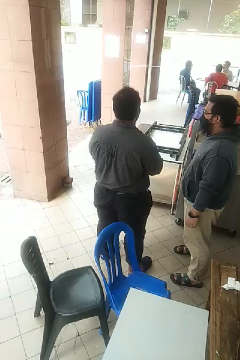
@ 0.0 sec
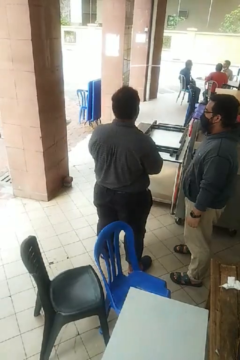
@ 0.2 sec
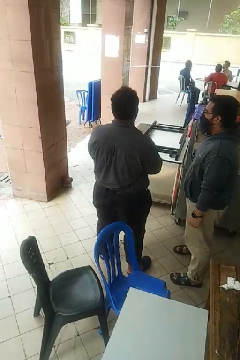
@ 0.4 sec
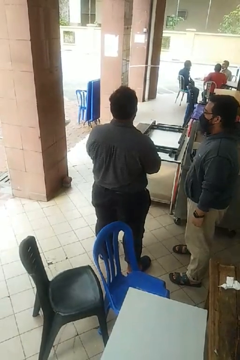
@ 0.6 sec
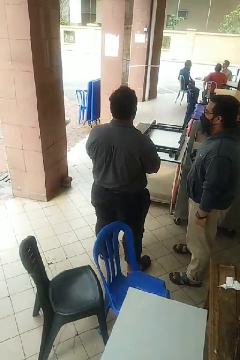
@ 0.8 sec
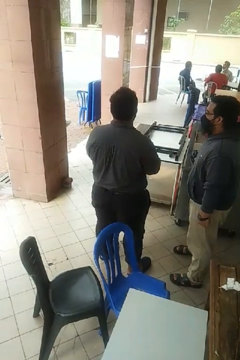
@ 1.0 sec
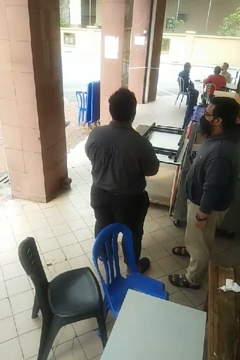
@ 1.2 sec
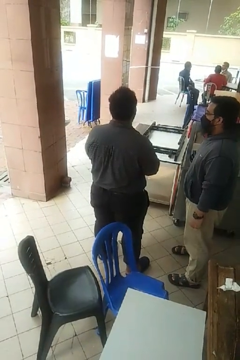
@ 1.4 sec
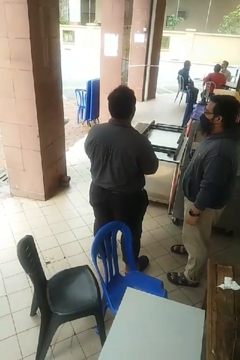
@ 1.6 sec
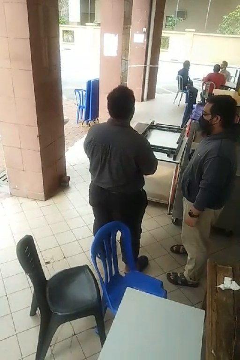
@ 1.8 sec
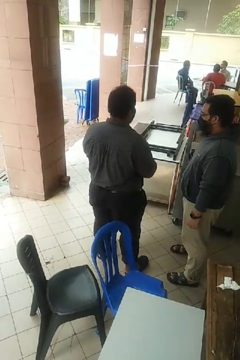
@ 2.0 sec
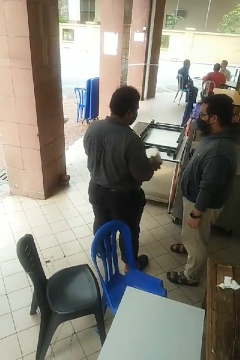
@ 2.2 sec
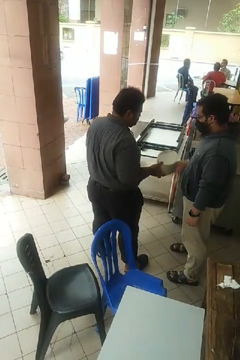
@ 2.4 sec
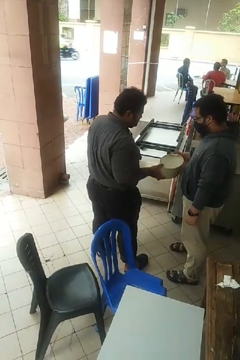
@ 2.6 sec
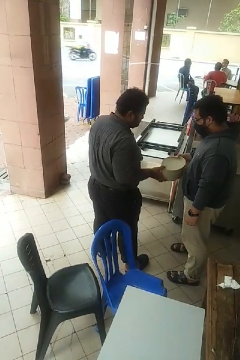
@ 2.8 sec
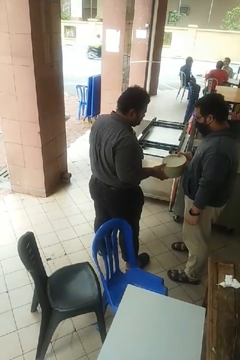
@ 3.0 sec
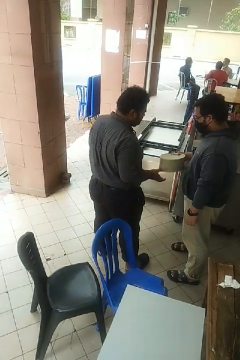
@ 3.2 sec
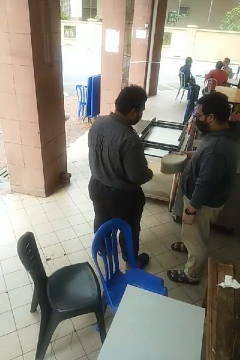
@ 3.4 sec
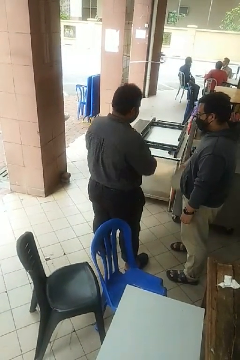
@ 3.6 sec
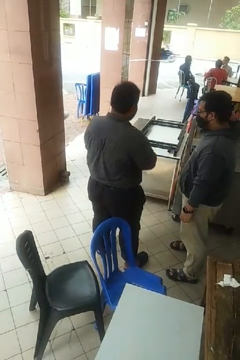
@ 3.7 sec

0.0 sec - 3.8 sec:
person transfers object to person

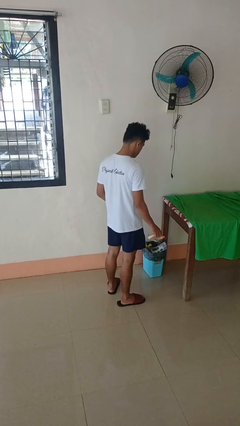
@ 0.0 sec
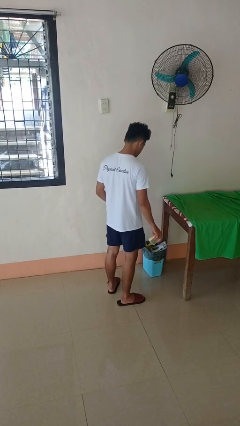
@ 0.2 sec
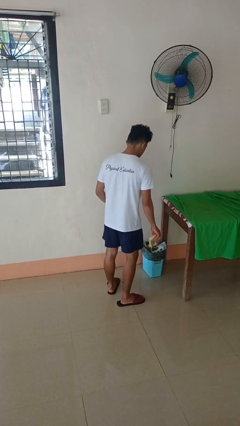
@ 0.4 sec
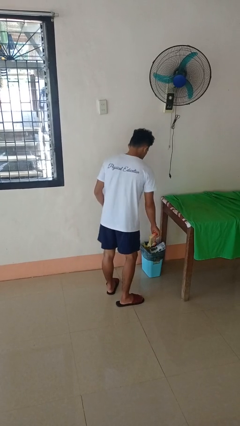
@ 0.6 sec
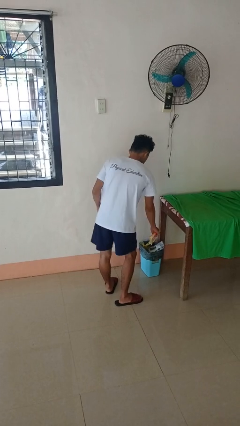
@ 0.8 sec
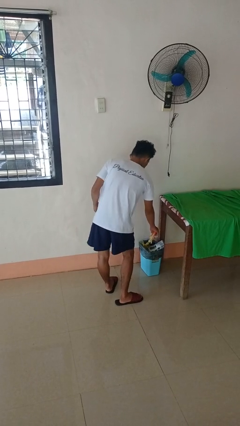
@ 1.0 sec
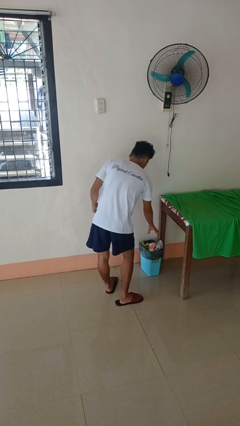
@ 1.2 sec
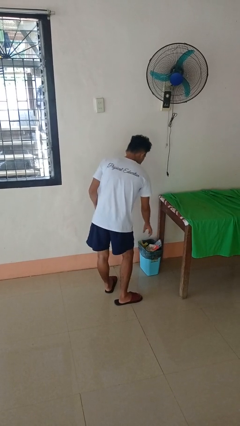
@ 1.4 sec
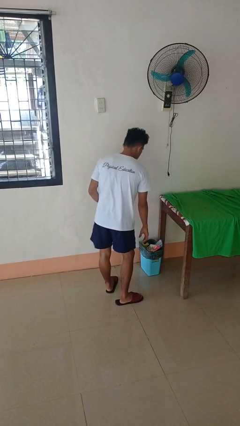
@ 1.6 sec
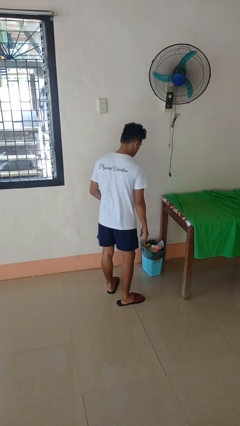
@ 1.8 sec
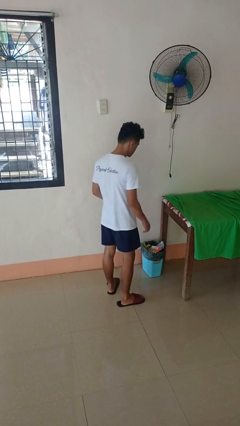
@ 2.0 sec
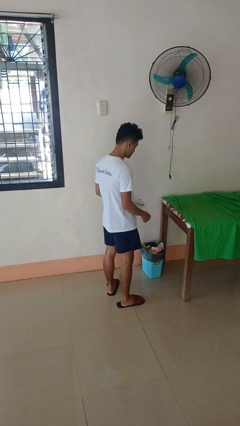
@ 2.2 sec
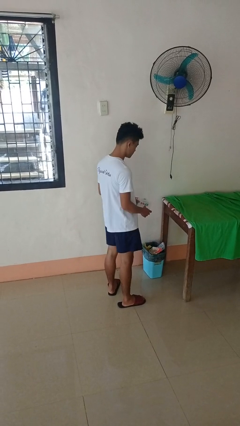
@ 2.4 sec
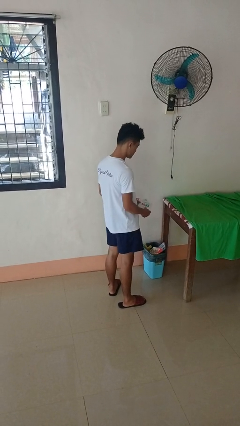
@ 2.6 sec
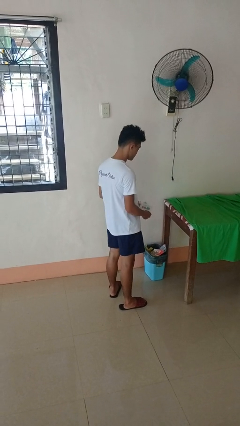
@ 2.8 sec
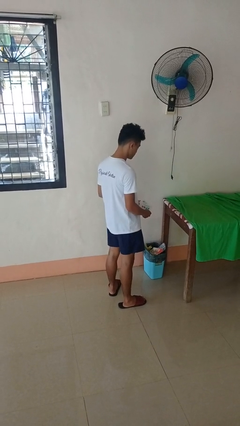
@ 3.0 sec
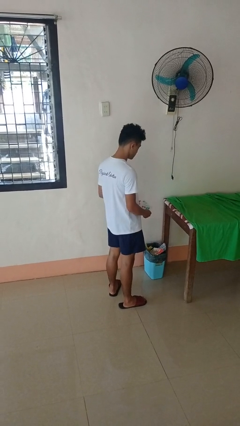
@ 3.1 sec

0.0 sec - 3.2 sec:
person discards trash

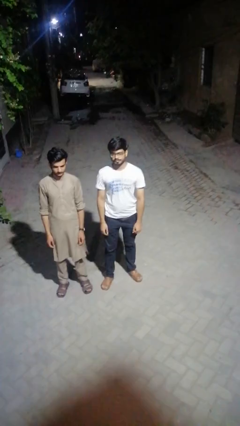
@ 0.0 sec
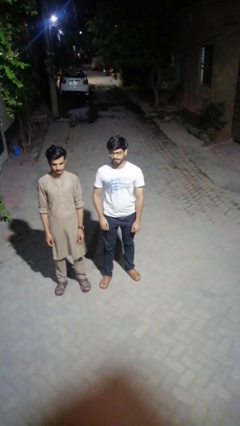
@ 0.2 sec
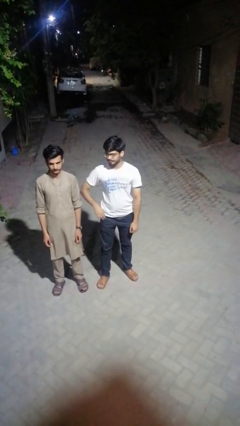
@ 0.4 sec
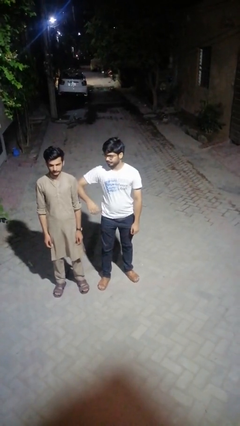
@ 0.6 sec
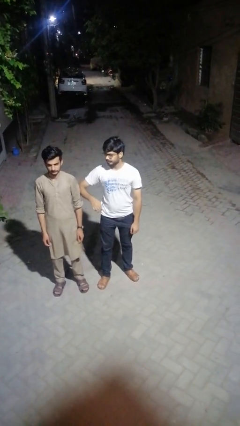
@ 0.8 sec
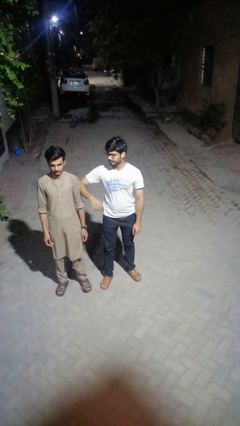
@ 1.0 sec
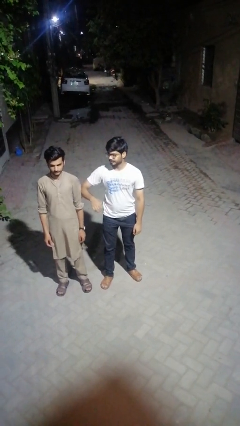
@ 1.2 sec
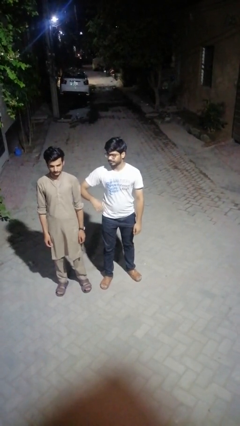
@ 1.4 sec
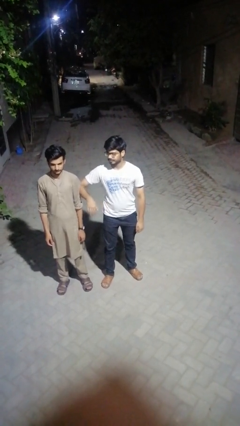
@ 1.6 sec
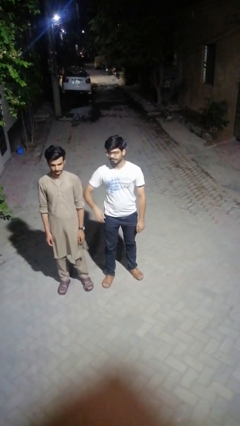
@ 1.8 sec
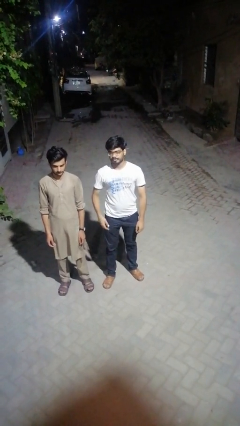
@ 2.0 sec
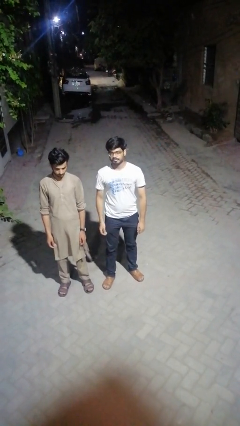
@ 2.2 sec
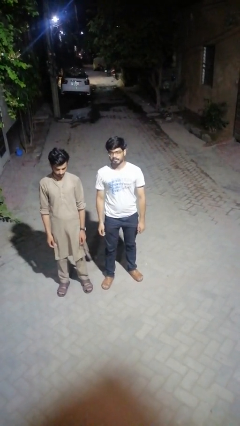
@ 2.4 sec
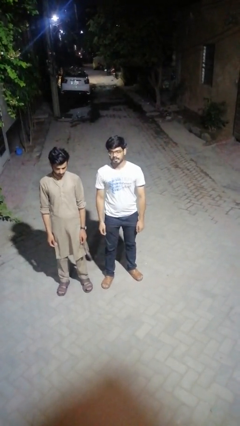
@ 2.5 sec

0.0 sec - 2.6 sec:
person nudges person with elbow

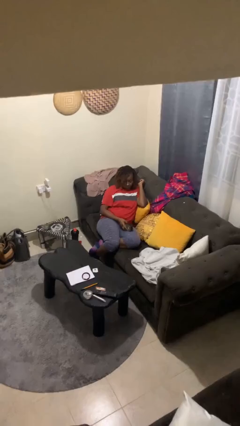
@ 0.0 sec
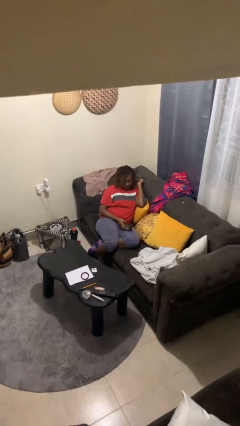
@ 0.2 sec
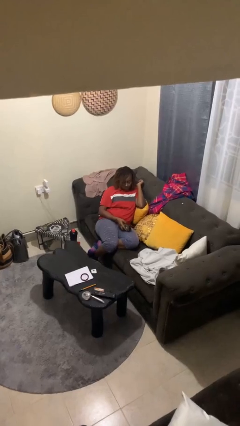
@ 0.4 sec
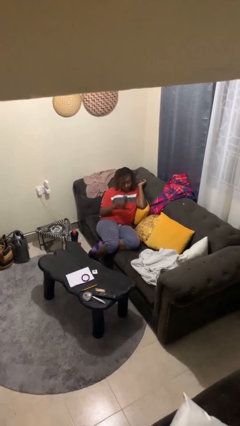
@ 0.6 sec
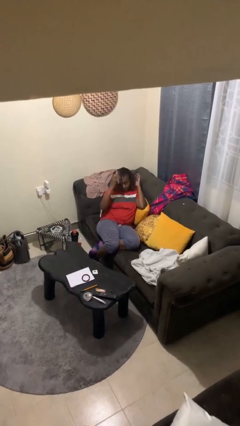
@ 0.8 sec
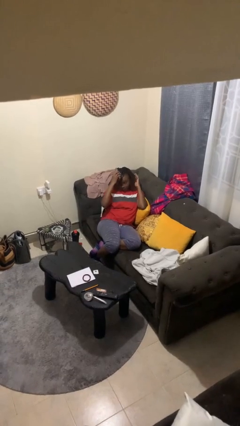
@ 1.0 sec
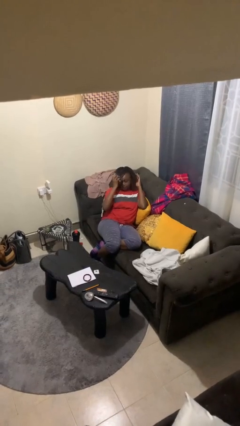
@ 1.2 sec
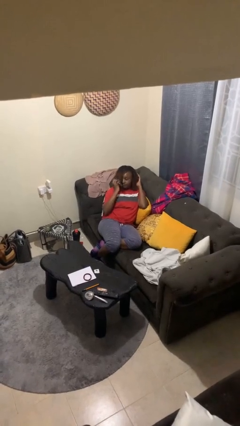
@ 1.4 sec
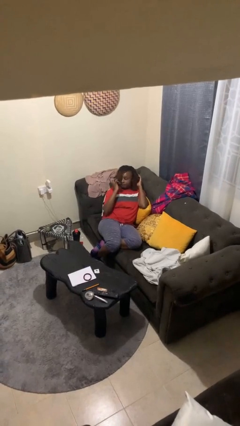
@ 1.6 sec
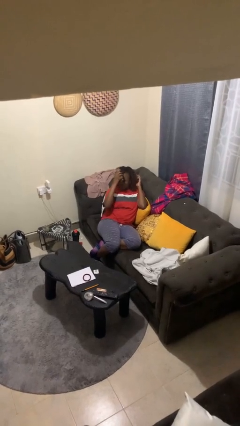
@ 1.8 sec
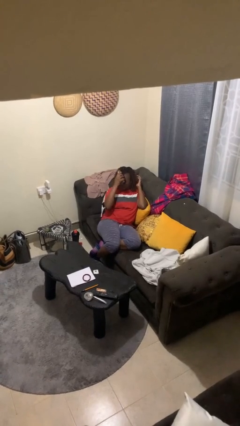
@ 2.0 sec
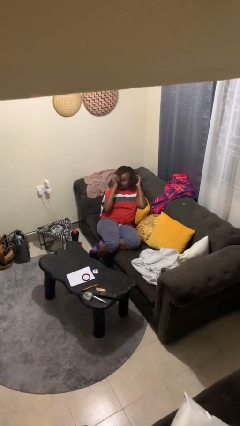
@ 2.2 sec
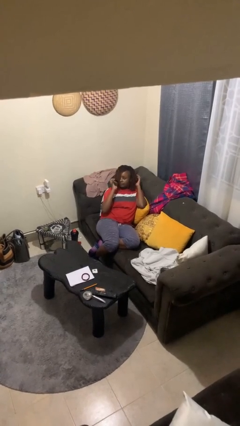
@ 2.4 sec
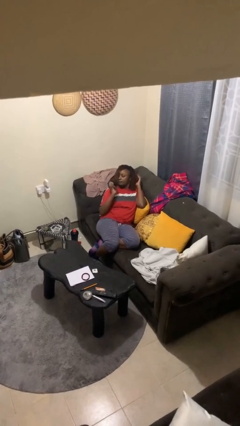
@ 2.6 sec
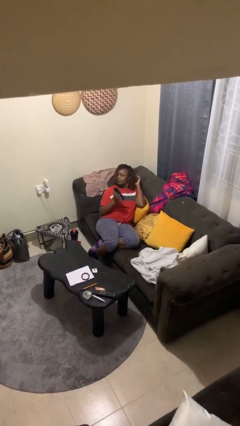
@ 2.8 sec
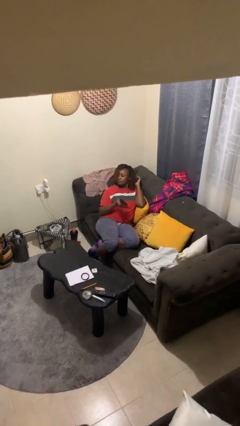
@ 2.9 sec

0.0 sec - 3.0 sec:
person brushes hair

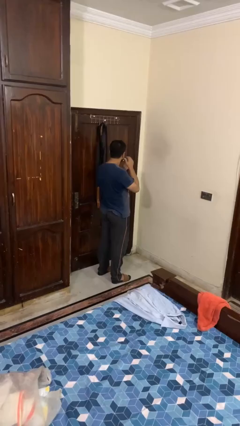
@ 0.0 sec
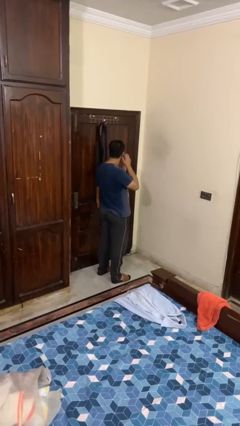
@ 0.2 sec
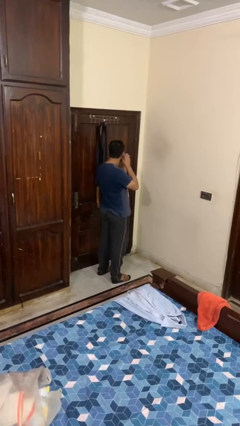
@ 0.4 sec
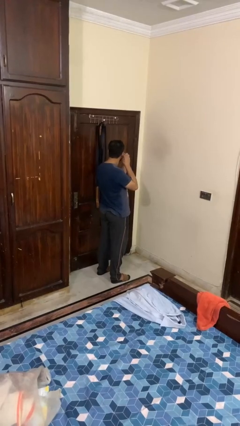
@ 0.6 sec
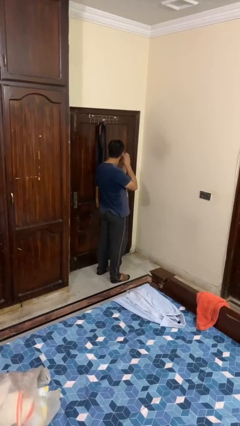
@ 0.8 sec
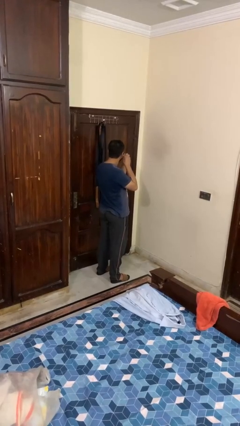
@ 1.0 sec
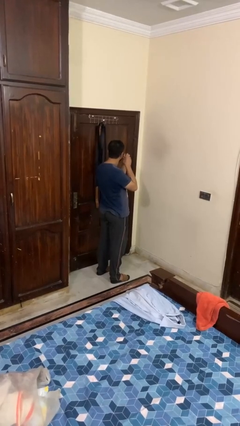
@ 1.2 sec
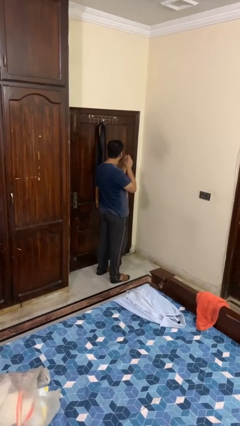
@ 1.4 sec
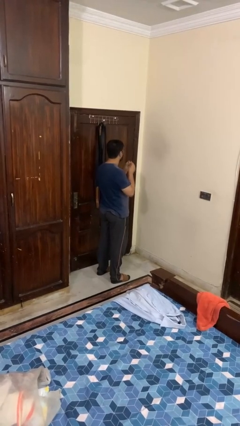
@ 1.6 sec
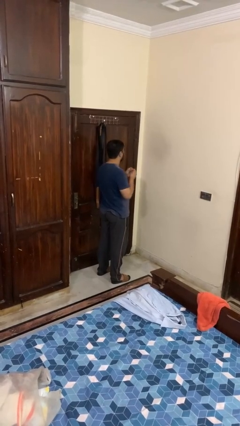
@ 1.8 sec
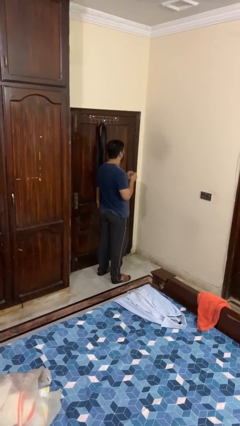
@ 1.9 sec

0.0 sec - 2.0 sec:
person takes off earrings

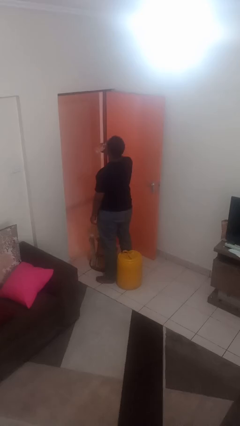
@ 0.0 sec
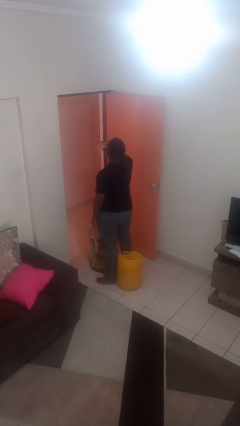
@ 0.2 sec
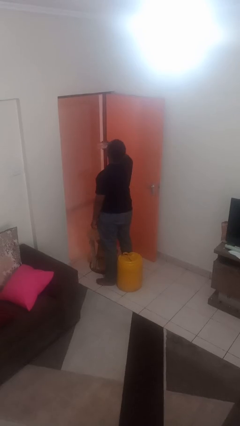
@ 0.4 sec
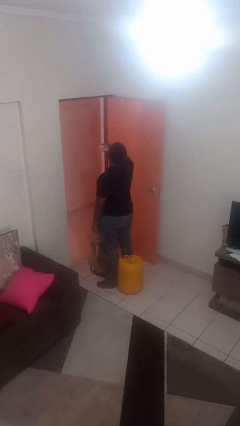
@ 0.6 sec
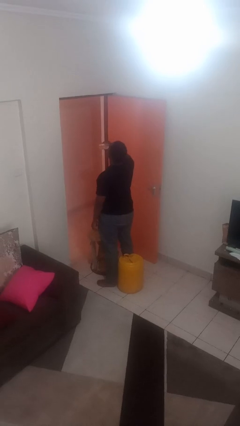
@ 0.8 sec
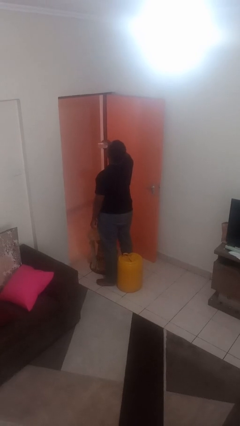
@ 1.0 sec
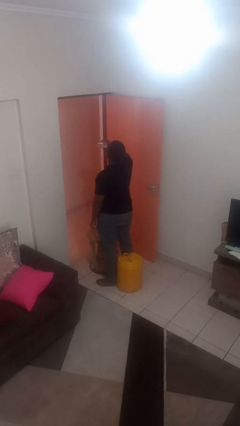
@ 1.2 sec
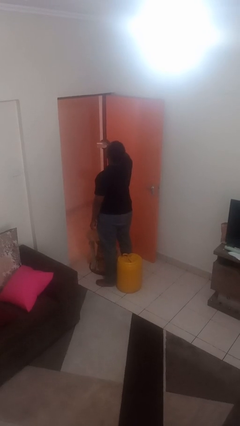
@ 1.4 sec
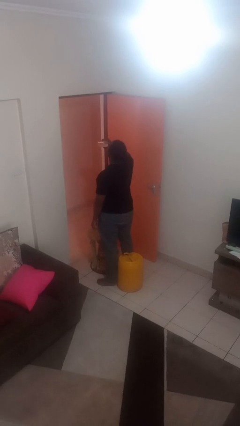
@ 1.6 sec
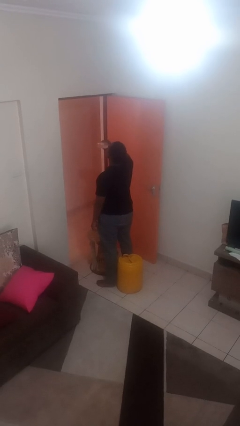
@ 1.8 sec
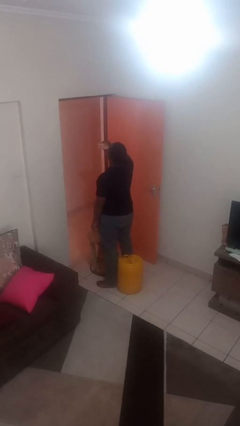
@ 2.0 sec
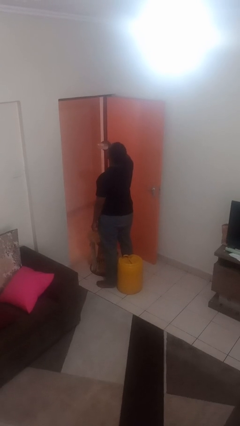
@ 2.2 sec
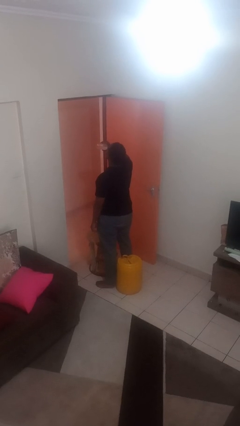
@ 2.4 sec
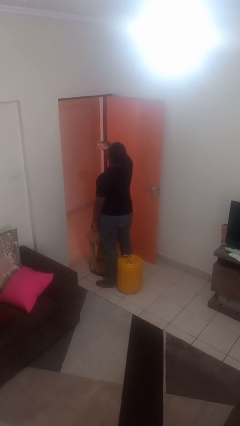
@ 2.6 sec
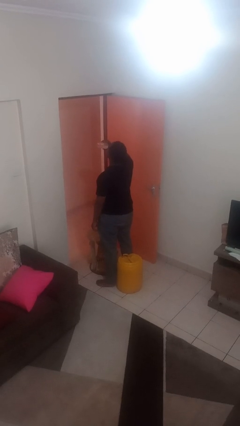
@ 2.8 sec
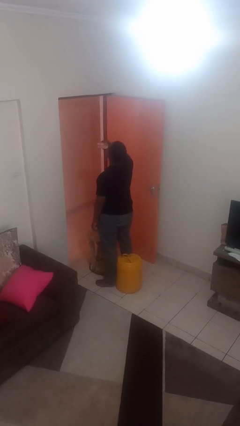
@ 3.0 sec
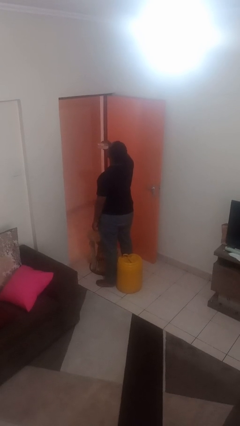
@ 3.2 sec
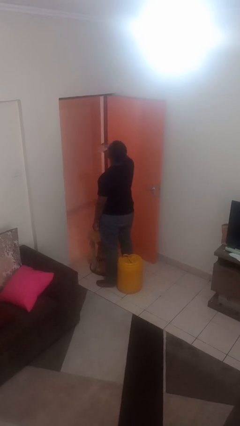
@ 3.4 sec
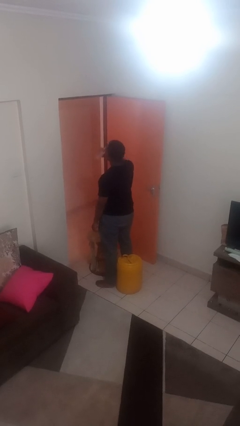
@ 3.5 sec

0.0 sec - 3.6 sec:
person drinks from bottle
